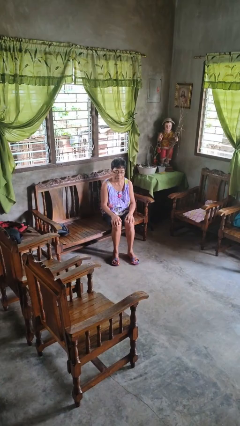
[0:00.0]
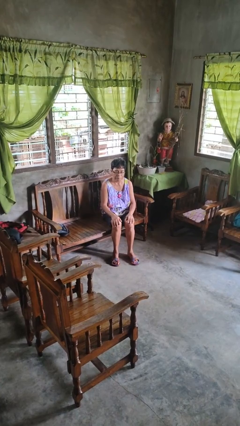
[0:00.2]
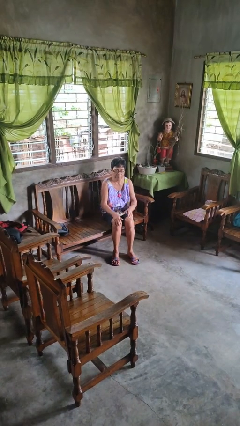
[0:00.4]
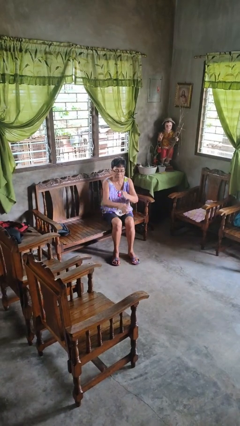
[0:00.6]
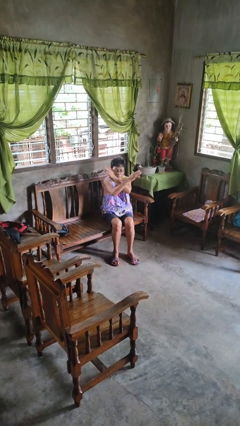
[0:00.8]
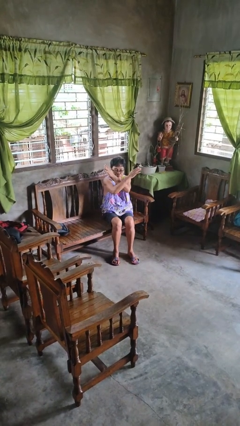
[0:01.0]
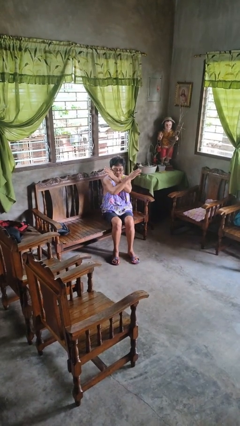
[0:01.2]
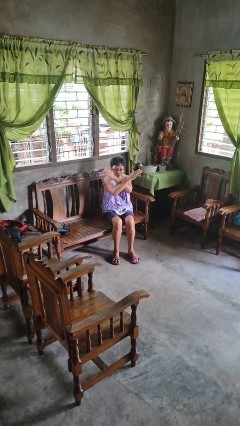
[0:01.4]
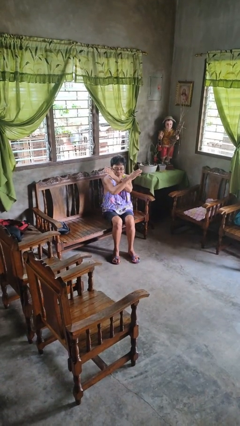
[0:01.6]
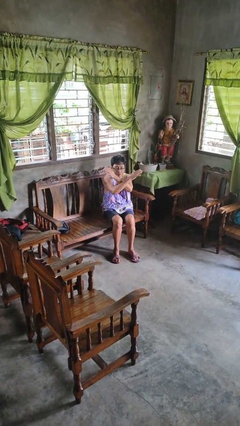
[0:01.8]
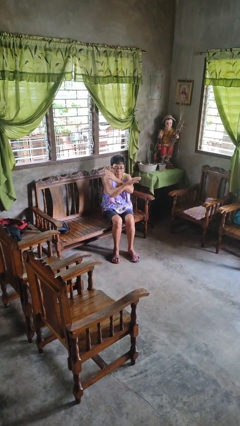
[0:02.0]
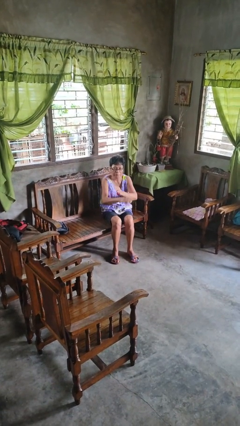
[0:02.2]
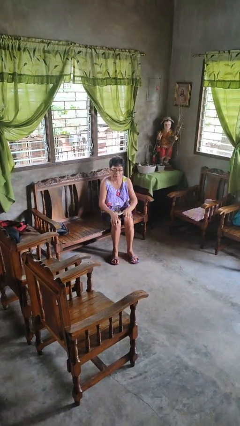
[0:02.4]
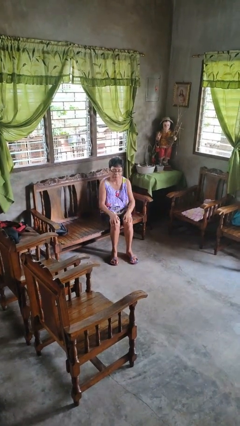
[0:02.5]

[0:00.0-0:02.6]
person gestures arms x

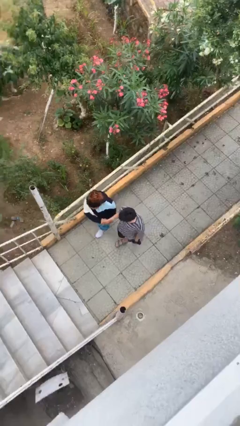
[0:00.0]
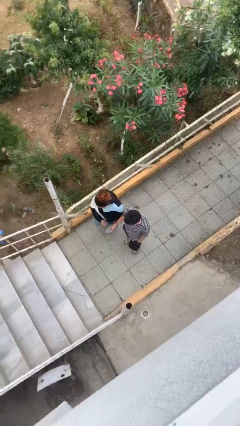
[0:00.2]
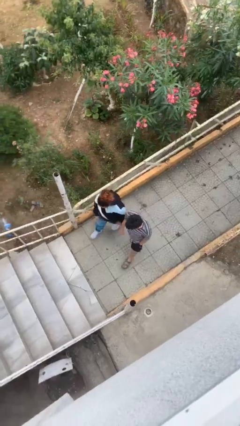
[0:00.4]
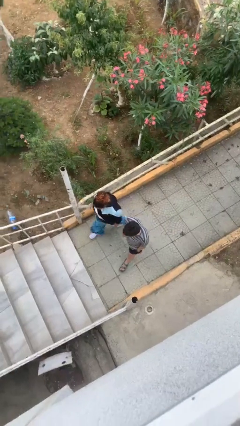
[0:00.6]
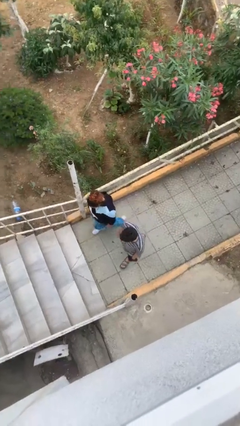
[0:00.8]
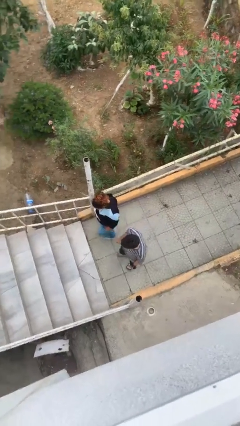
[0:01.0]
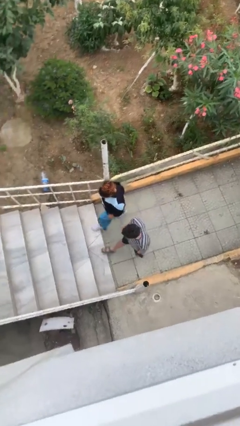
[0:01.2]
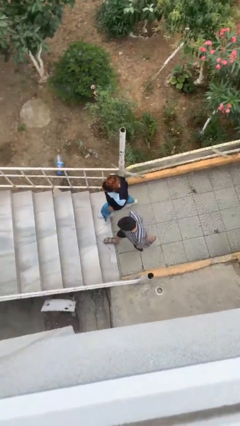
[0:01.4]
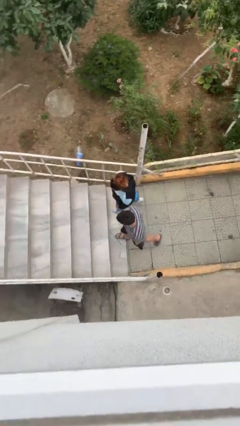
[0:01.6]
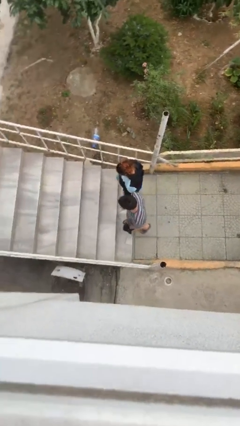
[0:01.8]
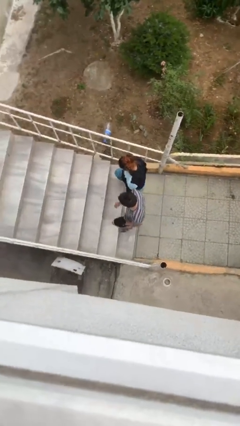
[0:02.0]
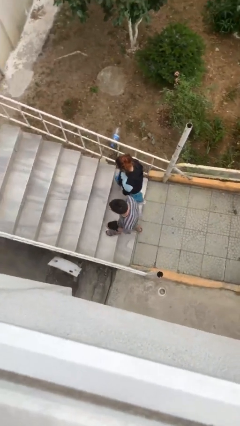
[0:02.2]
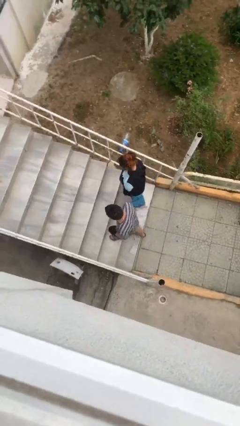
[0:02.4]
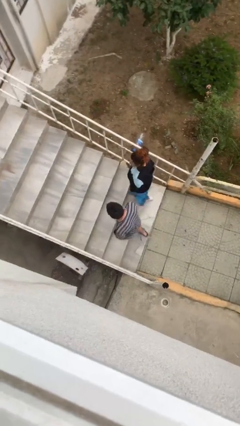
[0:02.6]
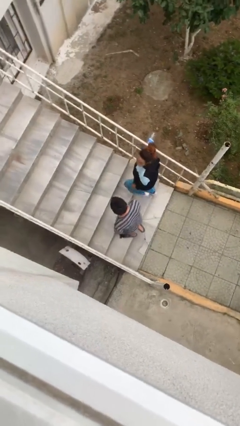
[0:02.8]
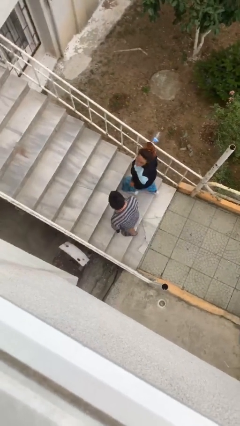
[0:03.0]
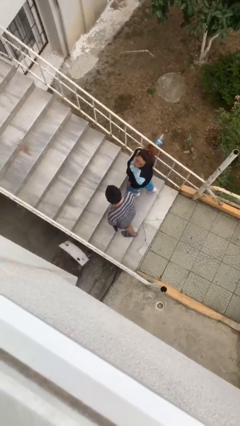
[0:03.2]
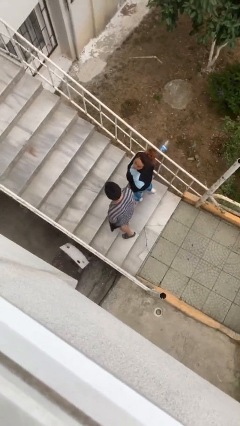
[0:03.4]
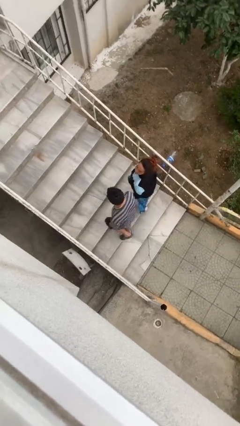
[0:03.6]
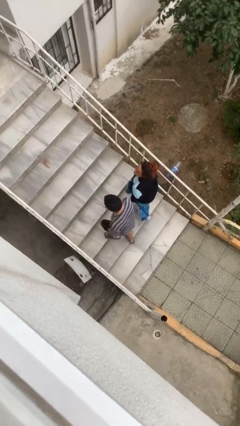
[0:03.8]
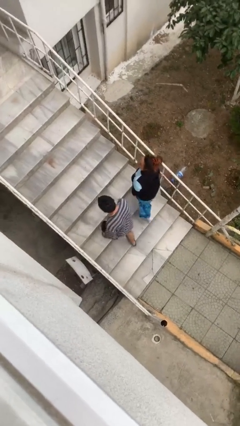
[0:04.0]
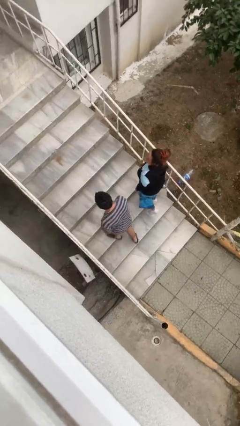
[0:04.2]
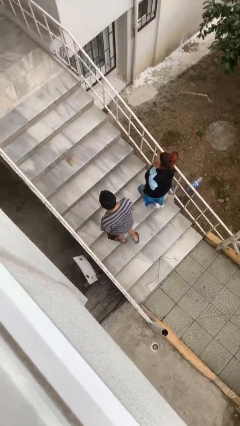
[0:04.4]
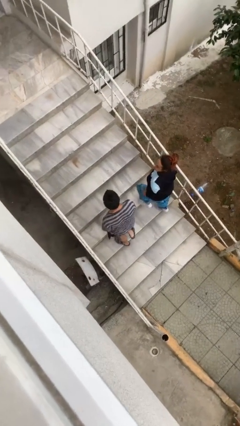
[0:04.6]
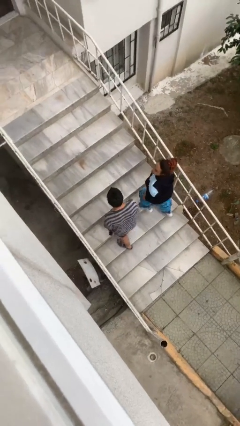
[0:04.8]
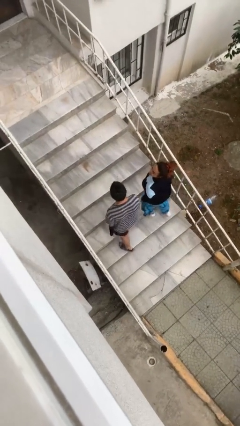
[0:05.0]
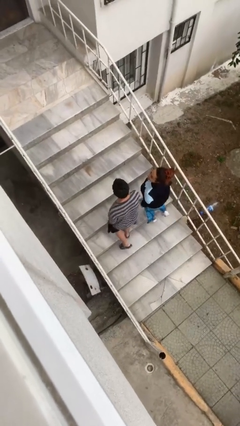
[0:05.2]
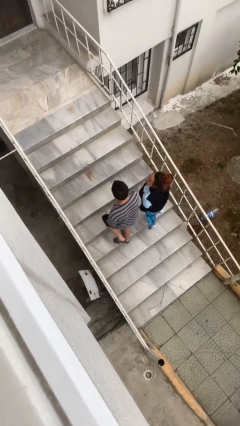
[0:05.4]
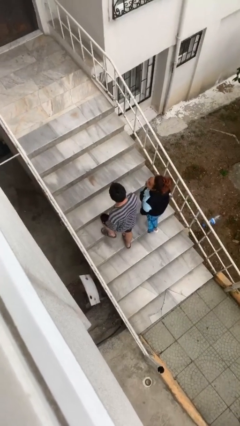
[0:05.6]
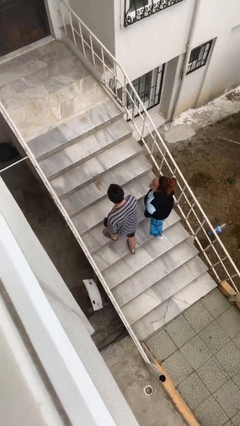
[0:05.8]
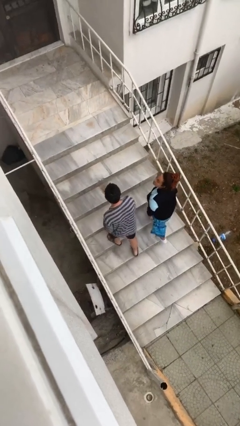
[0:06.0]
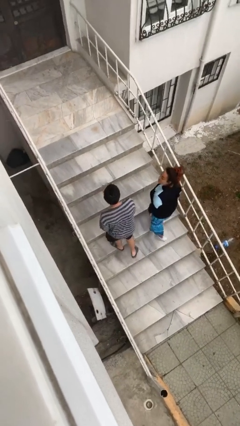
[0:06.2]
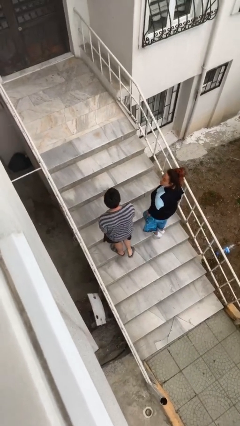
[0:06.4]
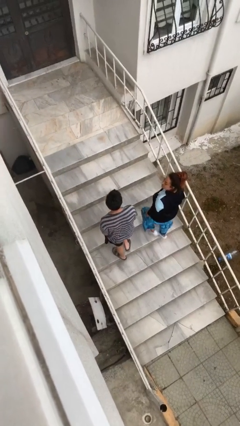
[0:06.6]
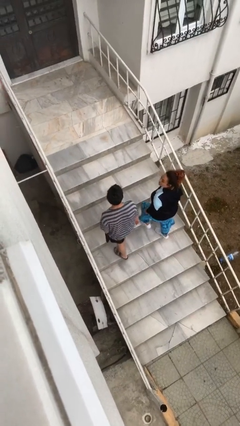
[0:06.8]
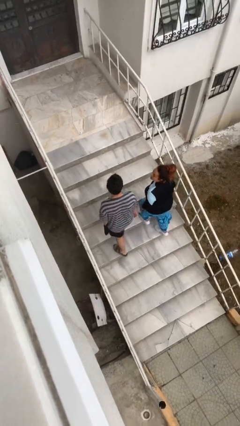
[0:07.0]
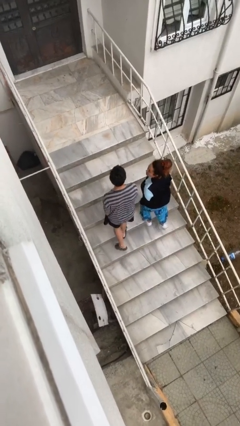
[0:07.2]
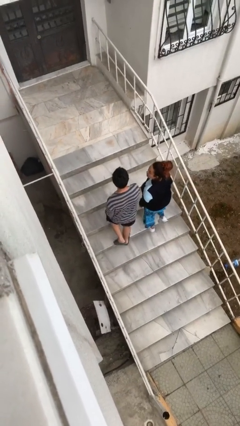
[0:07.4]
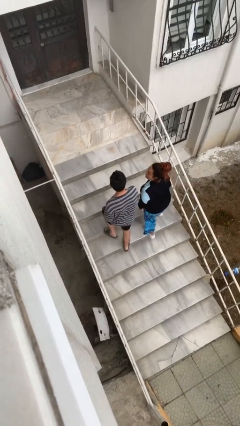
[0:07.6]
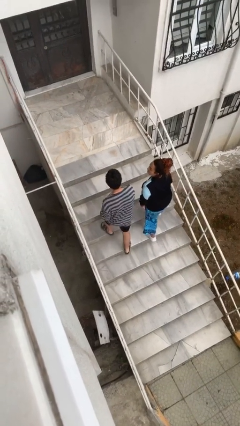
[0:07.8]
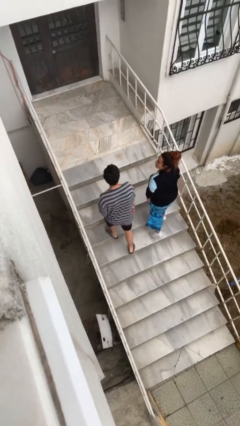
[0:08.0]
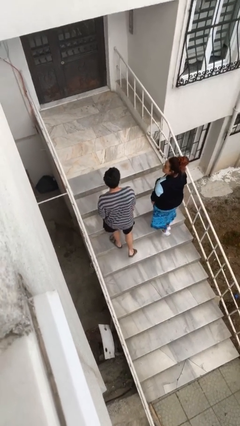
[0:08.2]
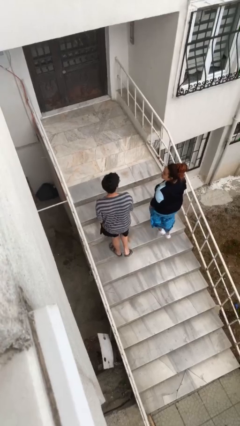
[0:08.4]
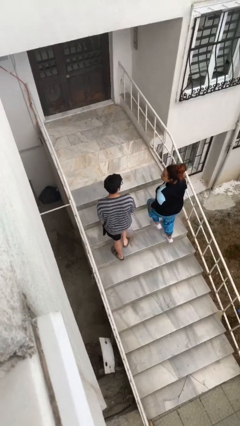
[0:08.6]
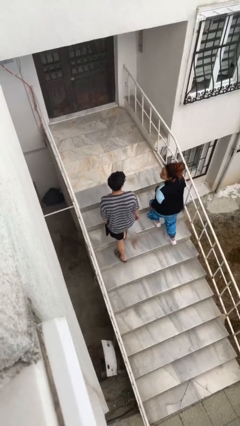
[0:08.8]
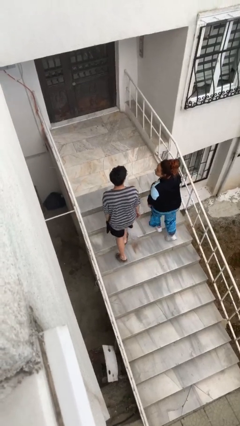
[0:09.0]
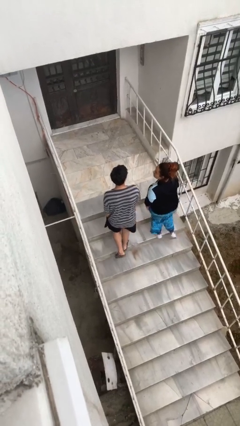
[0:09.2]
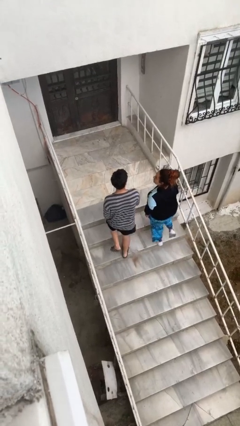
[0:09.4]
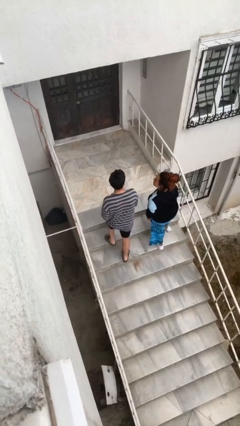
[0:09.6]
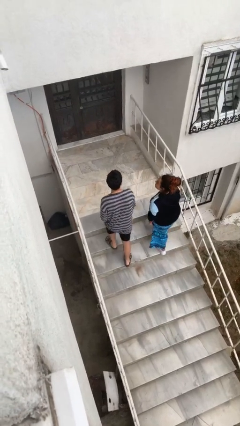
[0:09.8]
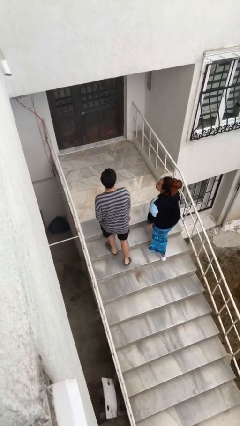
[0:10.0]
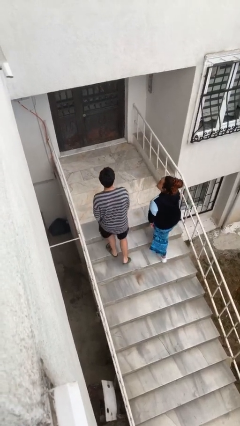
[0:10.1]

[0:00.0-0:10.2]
person talks to person

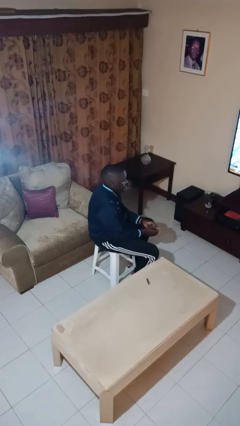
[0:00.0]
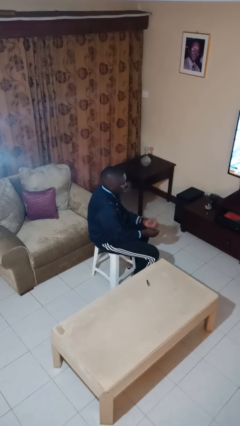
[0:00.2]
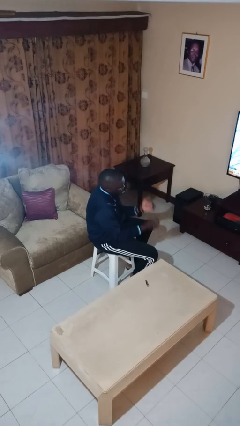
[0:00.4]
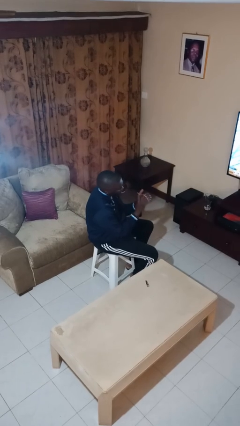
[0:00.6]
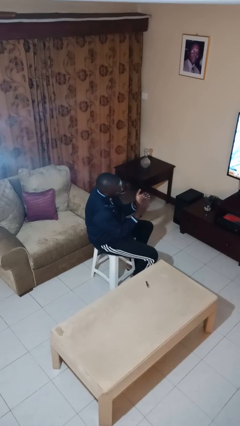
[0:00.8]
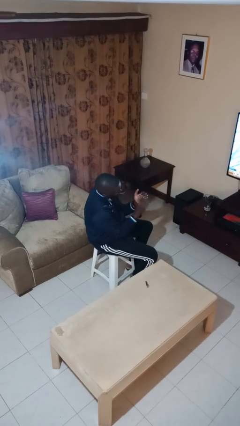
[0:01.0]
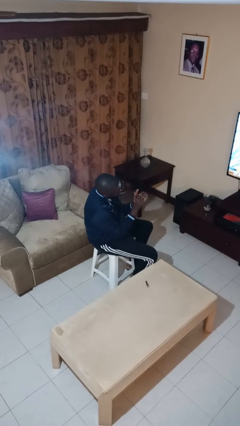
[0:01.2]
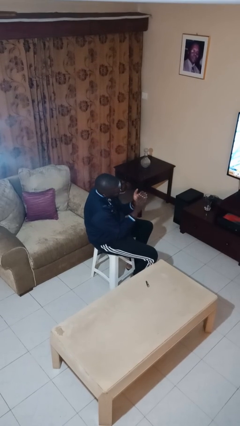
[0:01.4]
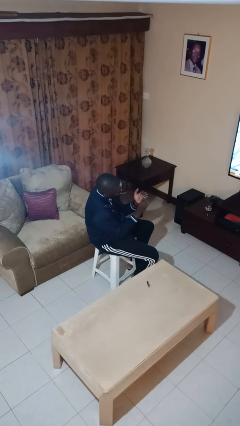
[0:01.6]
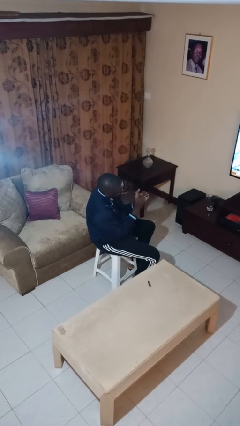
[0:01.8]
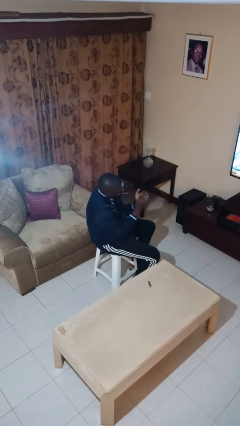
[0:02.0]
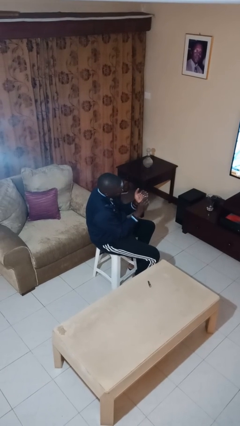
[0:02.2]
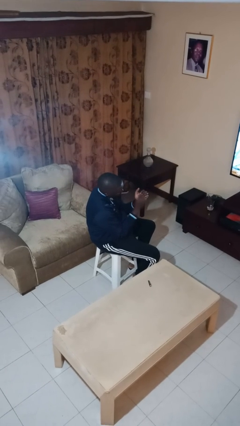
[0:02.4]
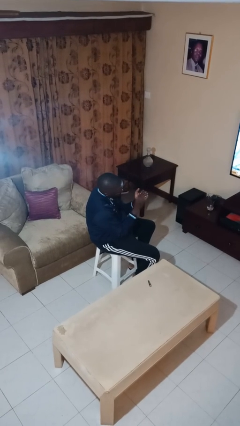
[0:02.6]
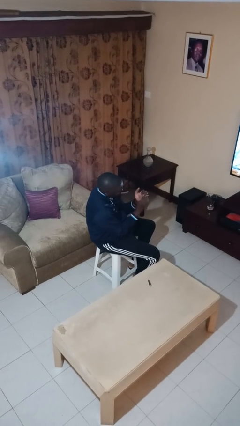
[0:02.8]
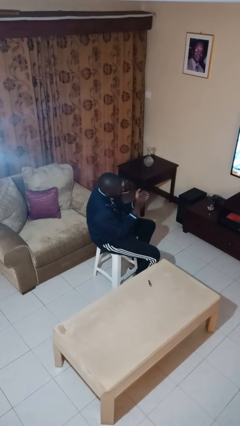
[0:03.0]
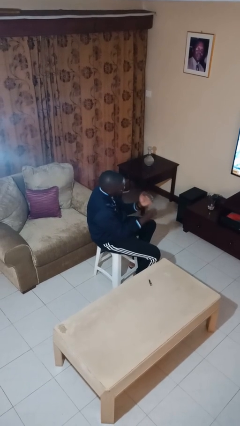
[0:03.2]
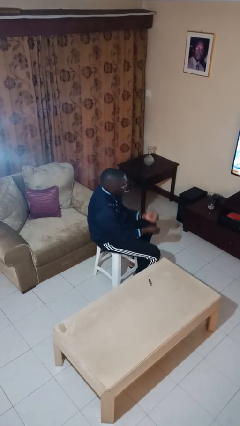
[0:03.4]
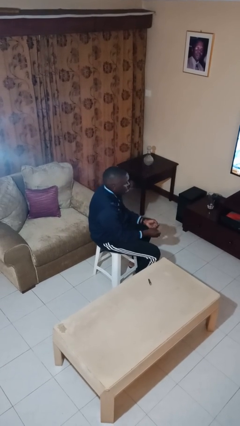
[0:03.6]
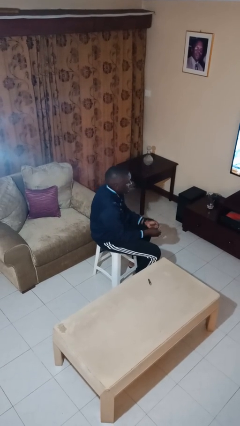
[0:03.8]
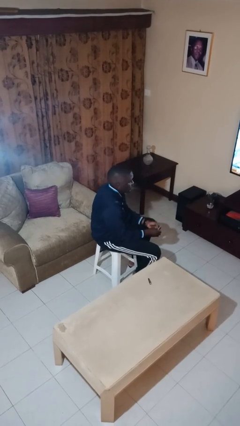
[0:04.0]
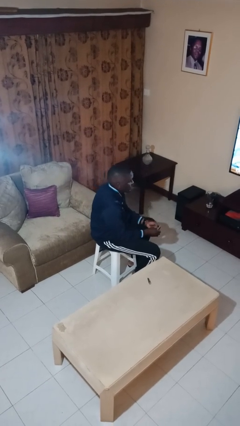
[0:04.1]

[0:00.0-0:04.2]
person files fingernails

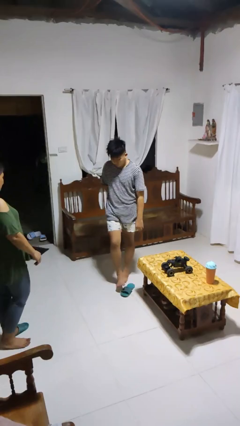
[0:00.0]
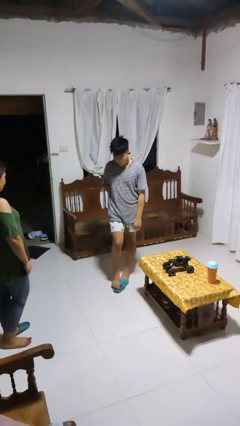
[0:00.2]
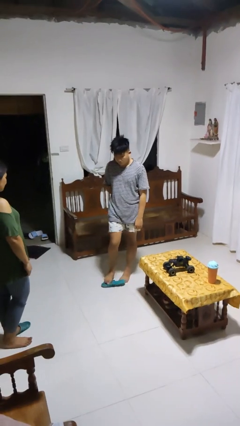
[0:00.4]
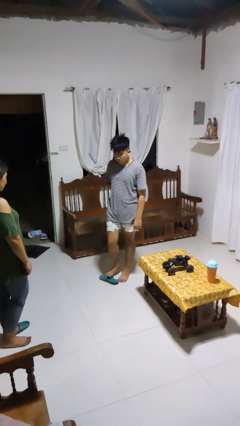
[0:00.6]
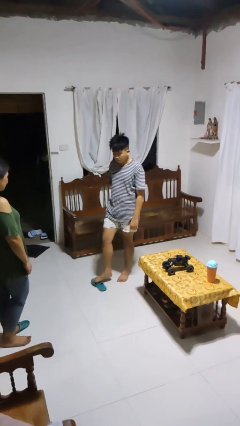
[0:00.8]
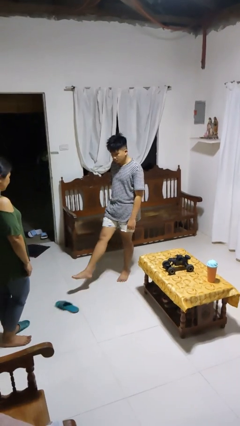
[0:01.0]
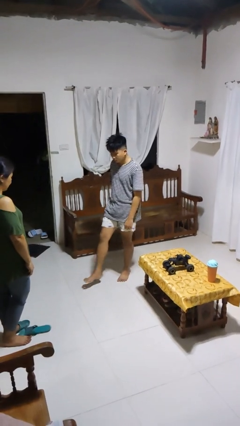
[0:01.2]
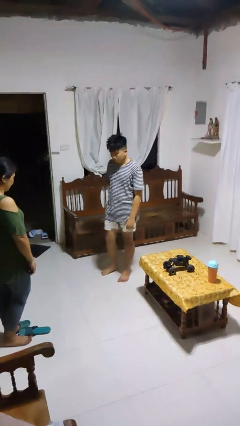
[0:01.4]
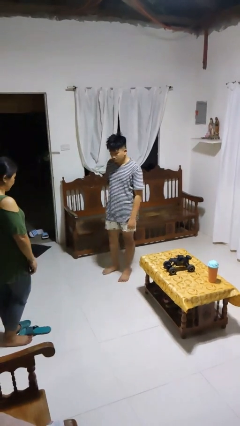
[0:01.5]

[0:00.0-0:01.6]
person kicks object to person
